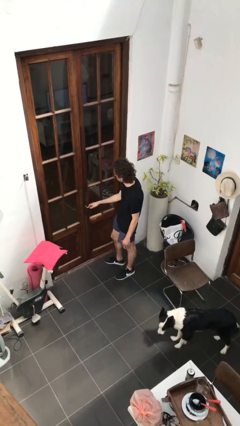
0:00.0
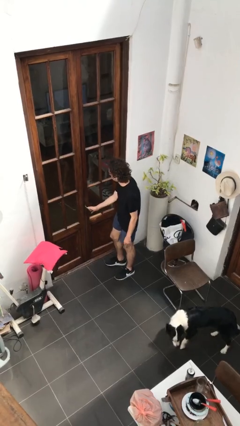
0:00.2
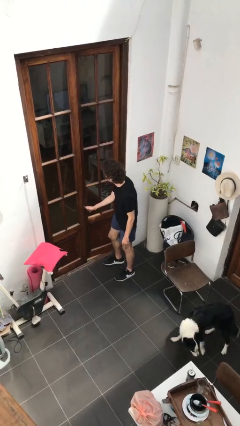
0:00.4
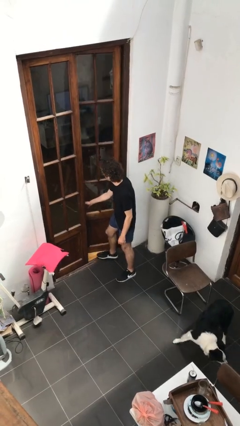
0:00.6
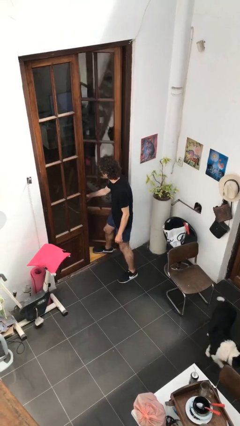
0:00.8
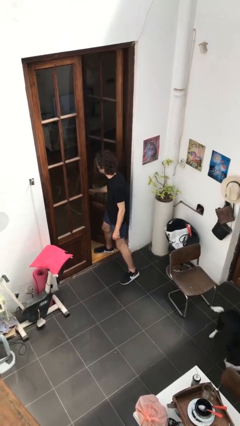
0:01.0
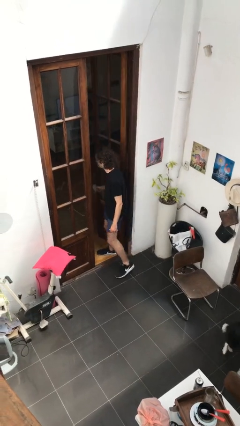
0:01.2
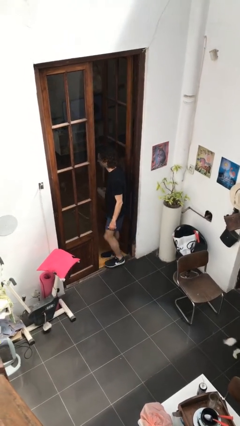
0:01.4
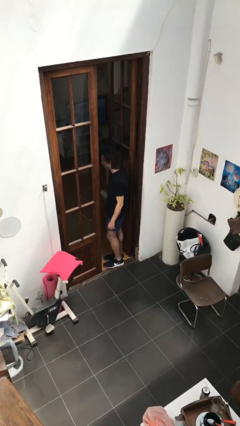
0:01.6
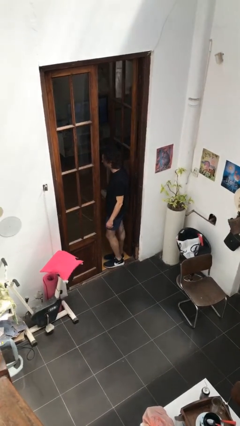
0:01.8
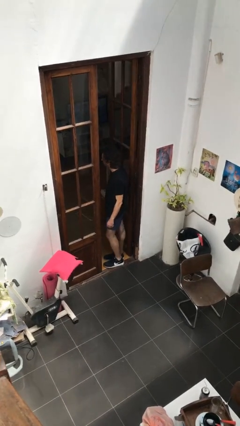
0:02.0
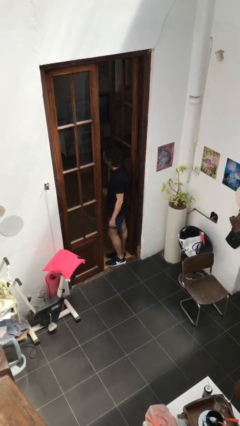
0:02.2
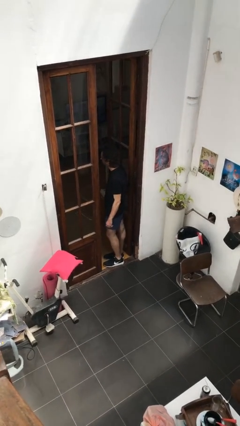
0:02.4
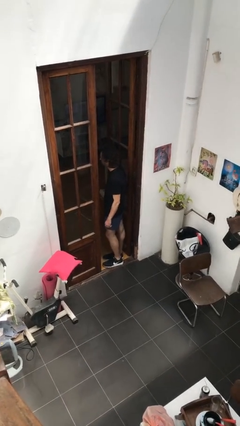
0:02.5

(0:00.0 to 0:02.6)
person opens facility door

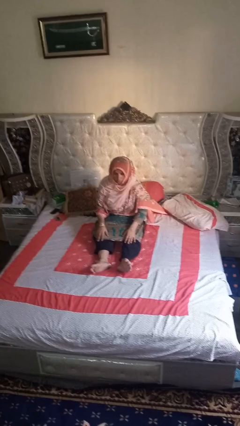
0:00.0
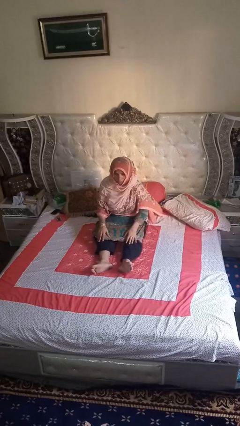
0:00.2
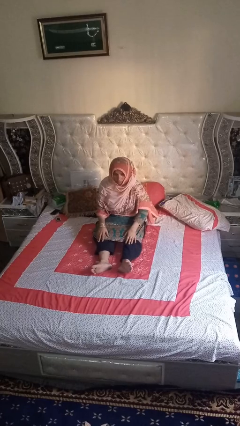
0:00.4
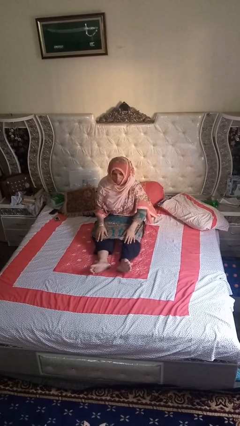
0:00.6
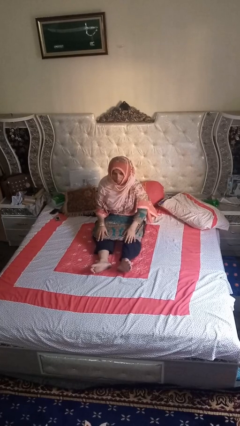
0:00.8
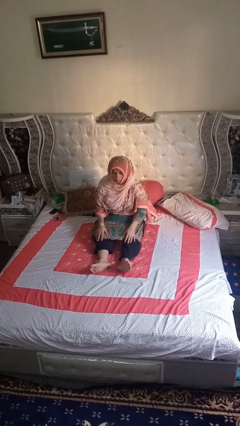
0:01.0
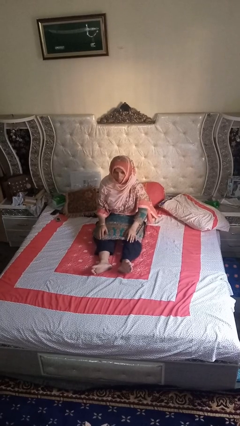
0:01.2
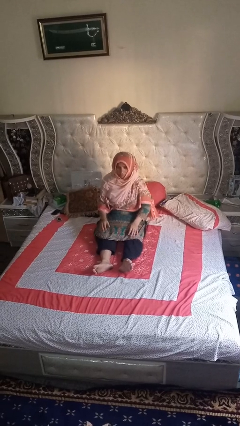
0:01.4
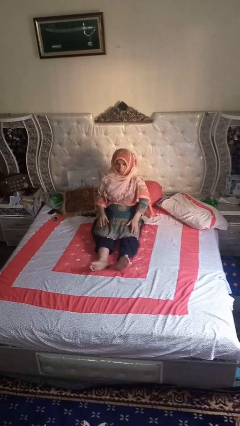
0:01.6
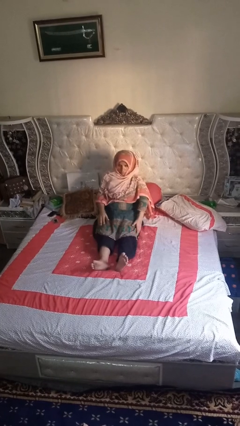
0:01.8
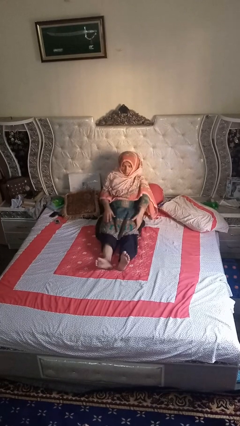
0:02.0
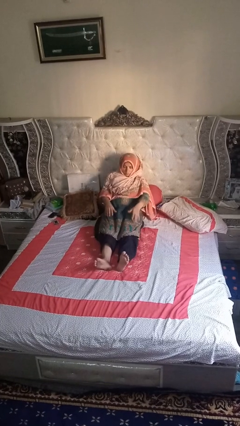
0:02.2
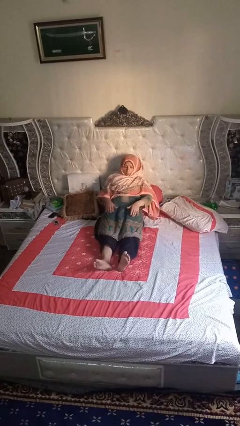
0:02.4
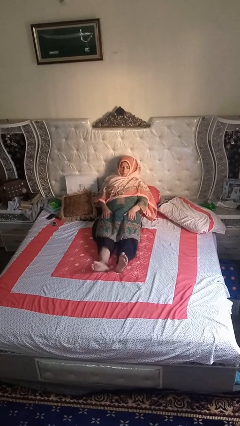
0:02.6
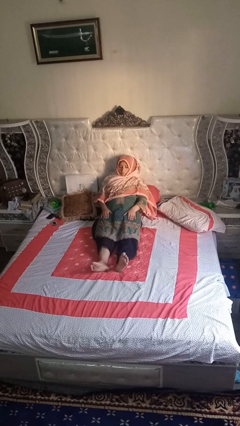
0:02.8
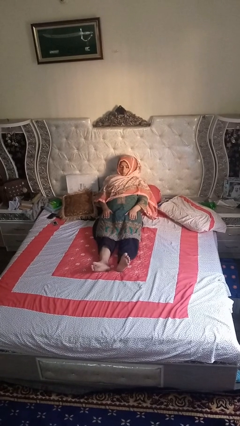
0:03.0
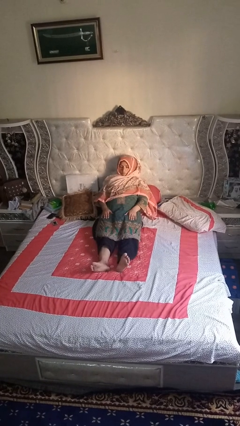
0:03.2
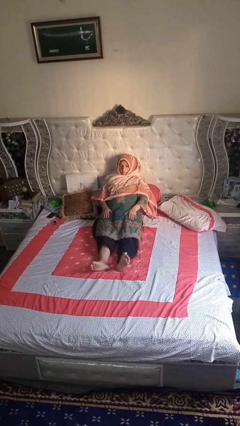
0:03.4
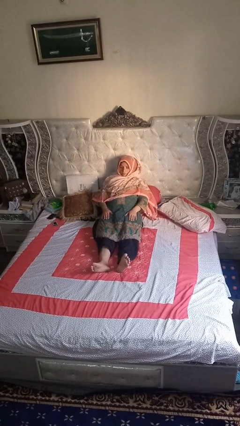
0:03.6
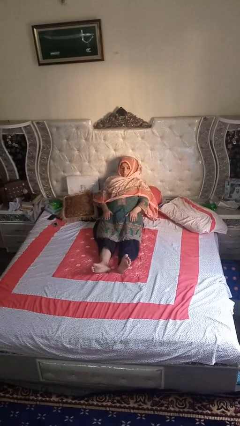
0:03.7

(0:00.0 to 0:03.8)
person lies down on bed

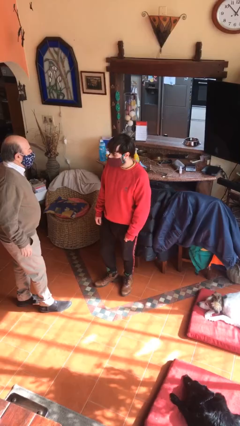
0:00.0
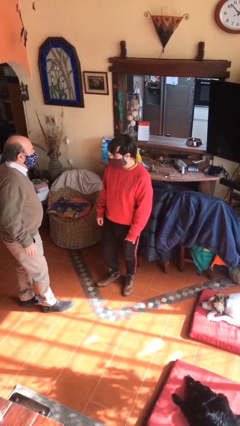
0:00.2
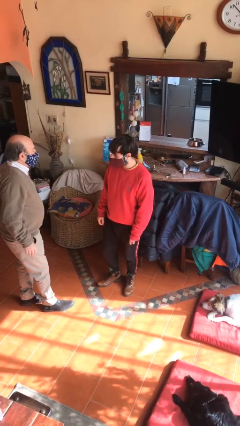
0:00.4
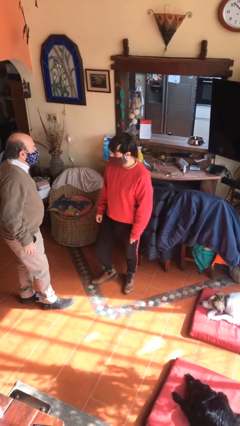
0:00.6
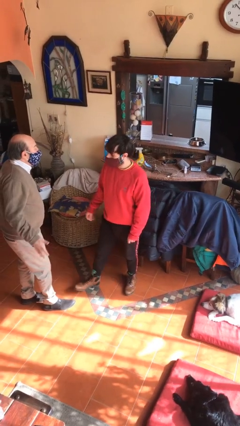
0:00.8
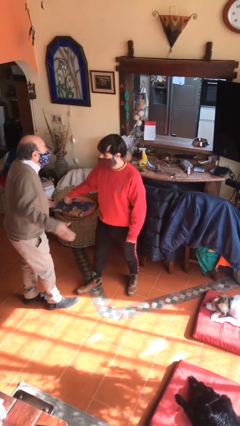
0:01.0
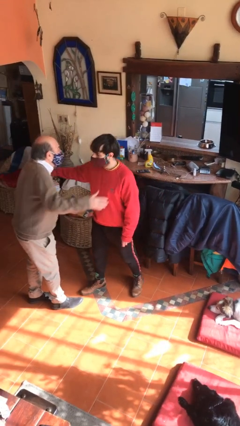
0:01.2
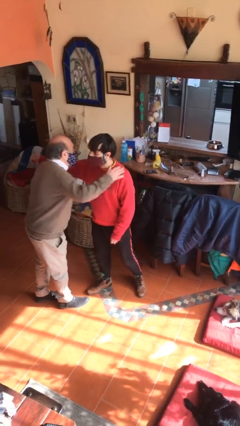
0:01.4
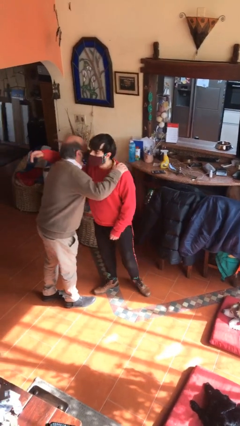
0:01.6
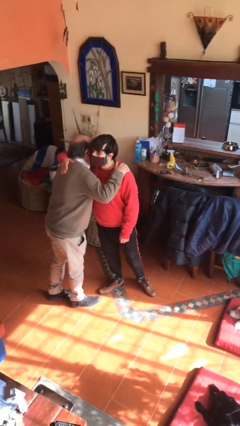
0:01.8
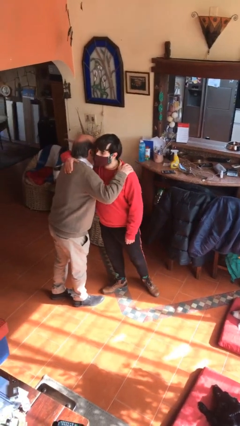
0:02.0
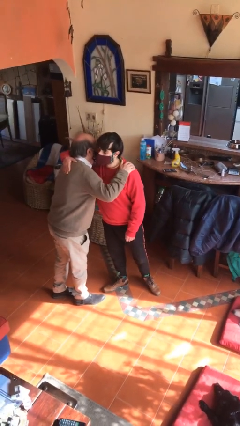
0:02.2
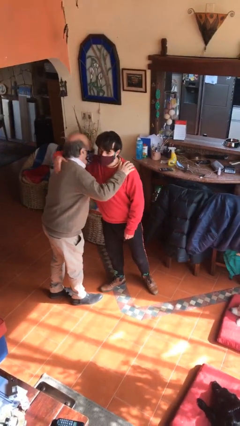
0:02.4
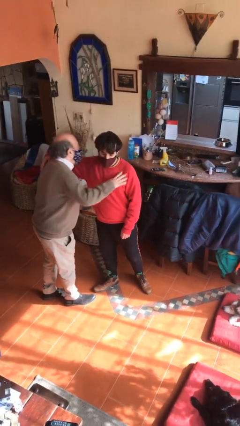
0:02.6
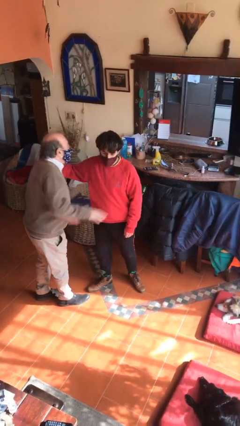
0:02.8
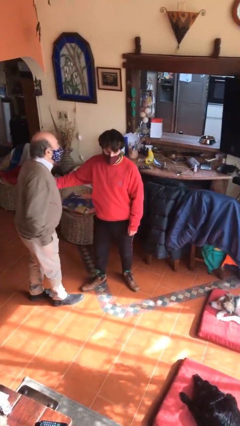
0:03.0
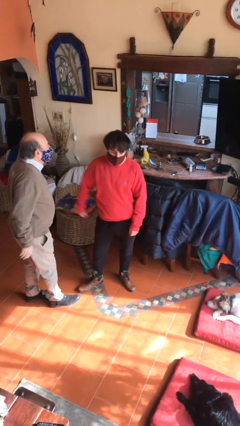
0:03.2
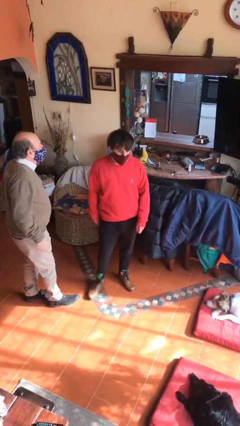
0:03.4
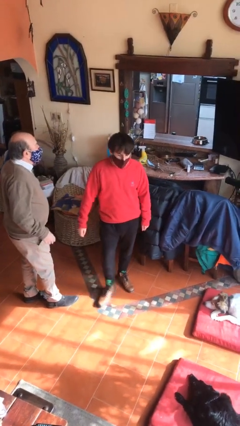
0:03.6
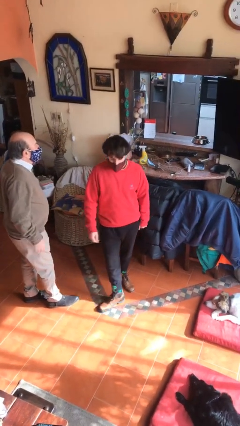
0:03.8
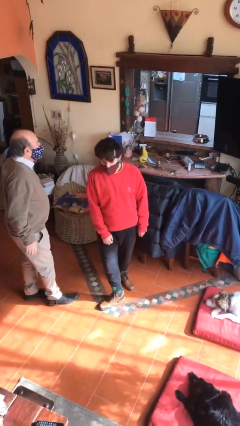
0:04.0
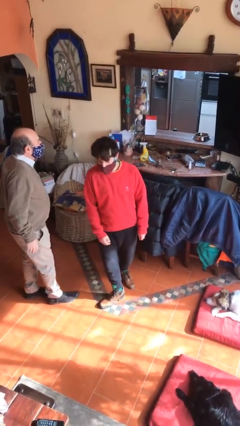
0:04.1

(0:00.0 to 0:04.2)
person kisses cheek of person

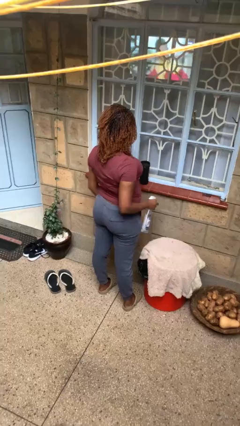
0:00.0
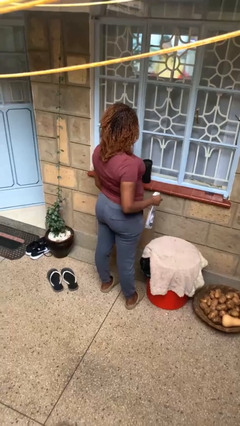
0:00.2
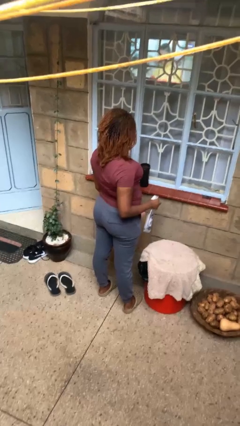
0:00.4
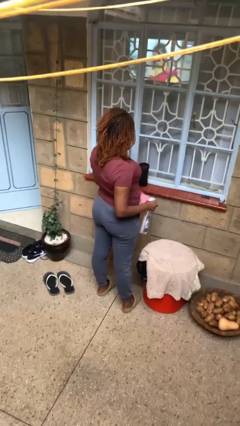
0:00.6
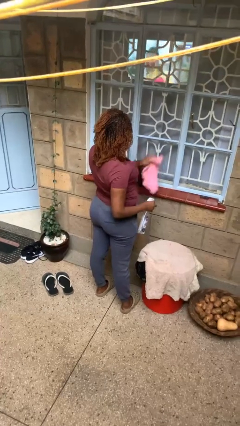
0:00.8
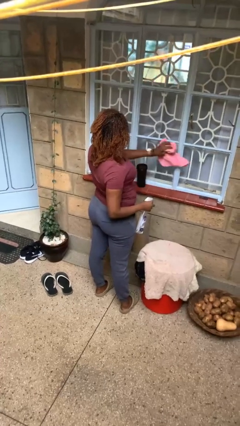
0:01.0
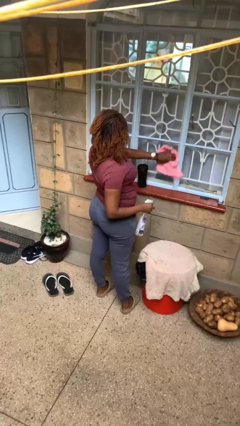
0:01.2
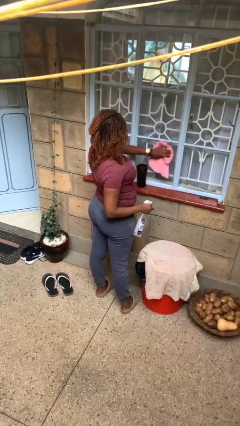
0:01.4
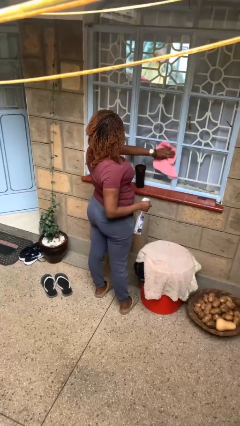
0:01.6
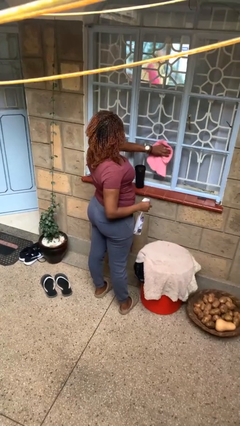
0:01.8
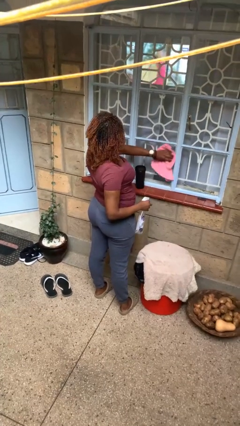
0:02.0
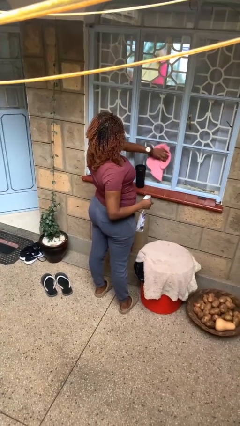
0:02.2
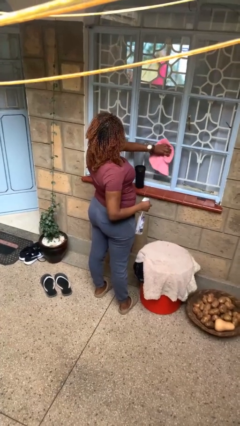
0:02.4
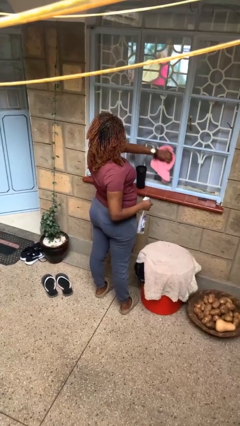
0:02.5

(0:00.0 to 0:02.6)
person washes window

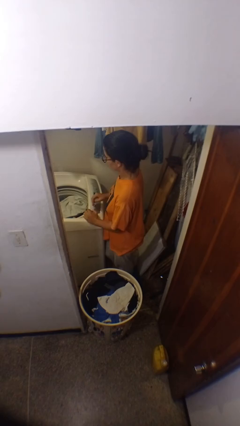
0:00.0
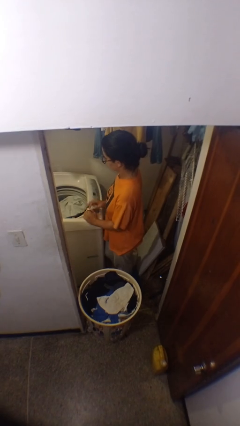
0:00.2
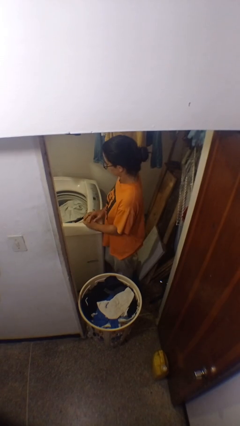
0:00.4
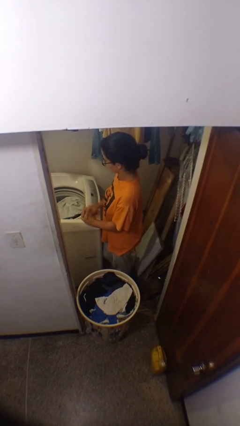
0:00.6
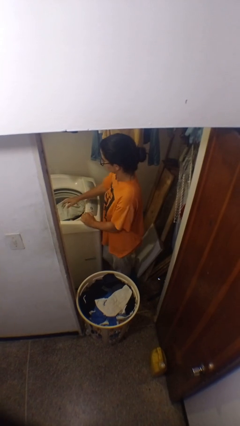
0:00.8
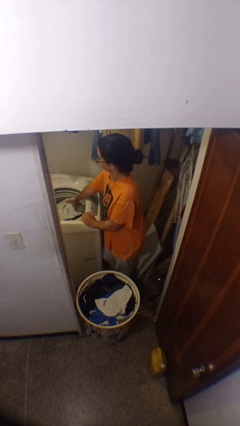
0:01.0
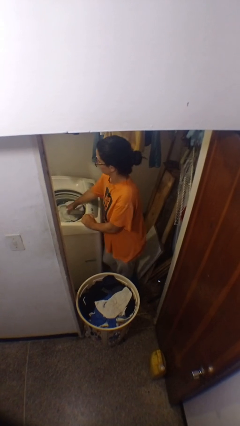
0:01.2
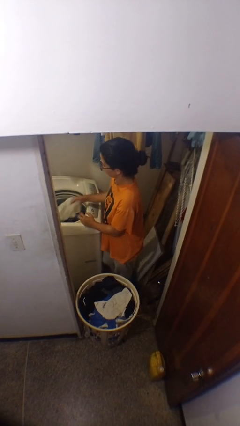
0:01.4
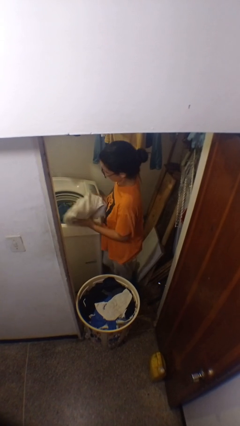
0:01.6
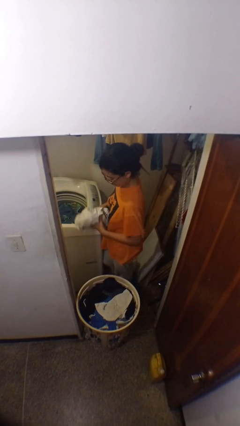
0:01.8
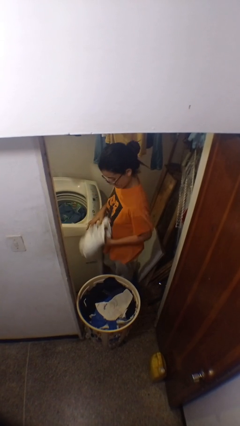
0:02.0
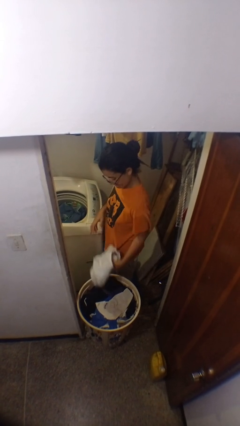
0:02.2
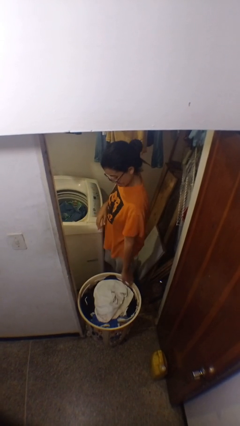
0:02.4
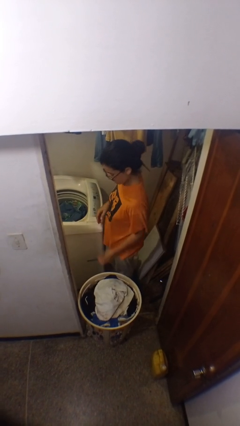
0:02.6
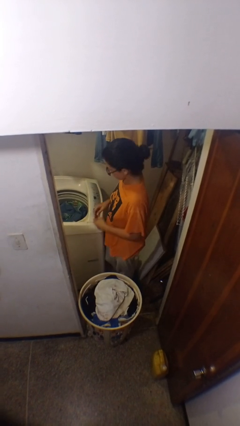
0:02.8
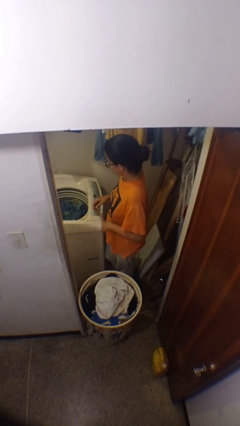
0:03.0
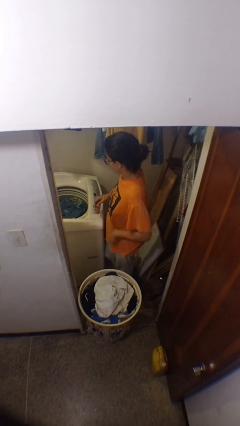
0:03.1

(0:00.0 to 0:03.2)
person unloads clotheswasher

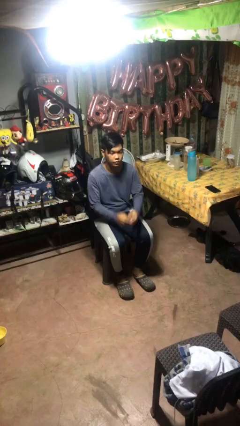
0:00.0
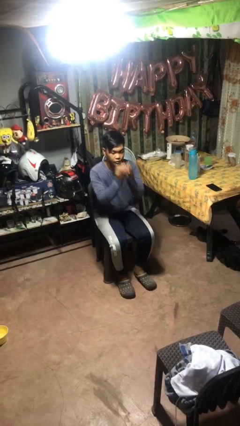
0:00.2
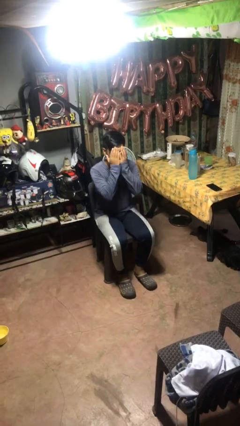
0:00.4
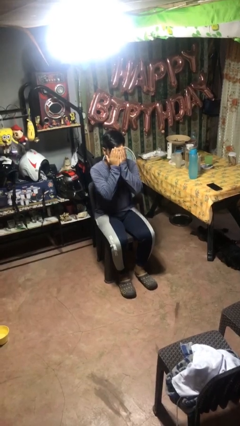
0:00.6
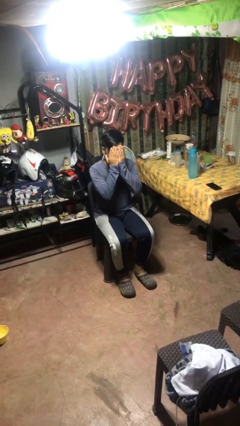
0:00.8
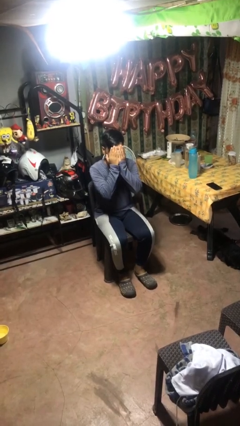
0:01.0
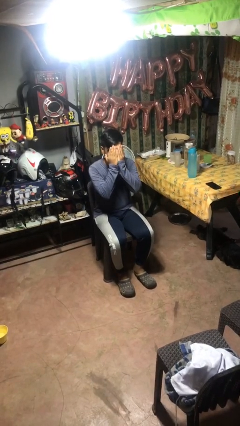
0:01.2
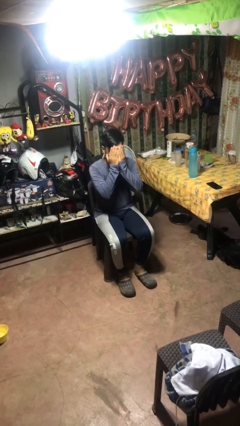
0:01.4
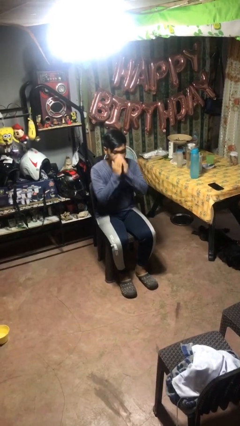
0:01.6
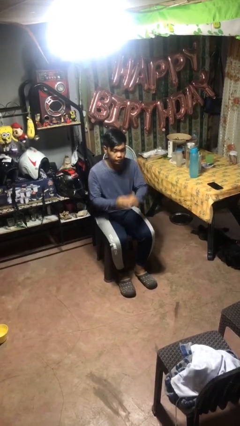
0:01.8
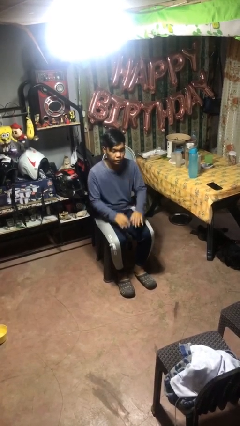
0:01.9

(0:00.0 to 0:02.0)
person covers face with hands
